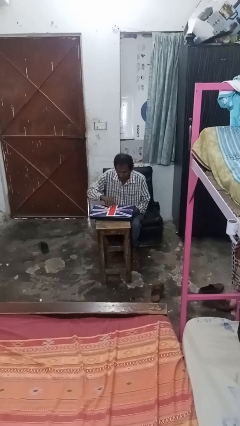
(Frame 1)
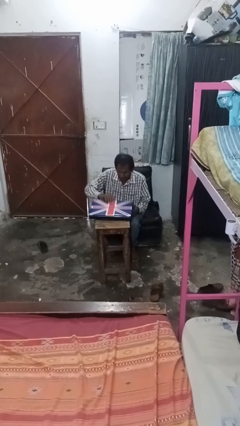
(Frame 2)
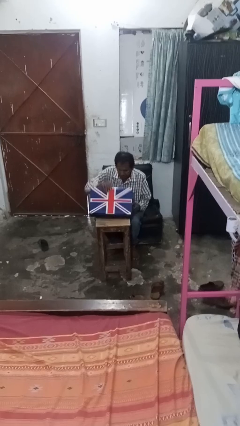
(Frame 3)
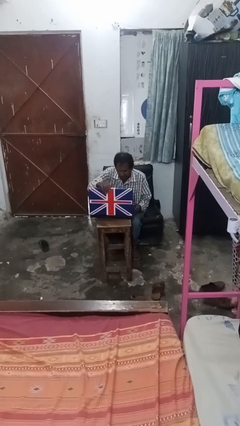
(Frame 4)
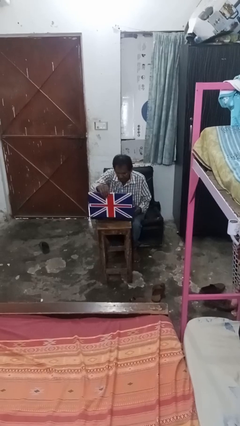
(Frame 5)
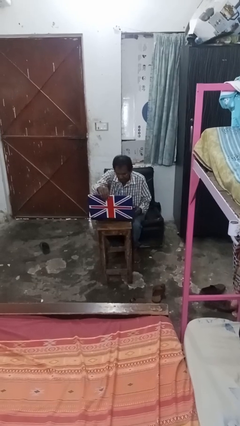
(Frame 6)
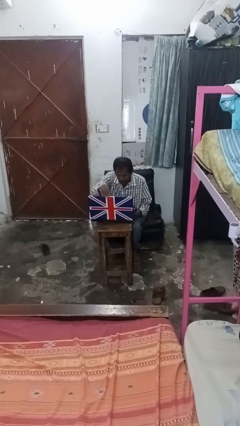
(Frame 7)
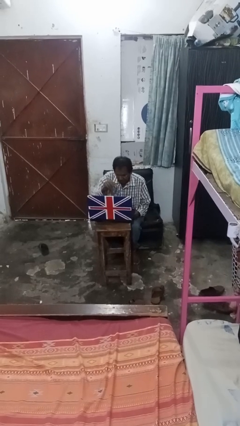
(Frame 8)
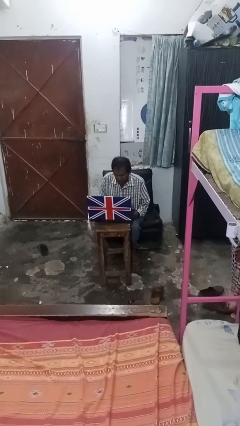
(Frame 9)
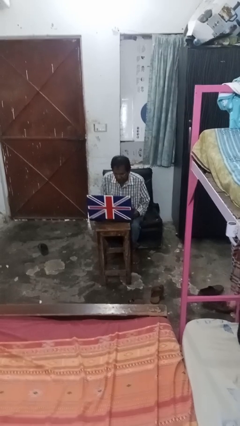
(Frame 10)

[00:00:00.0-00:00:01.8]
person opens laptop

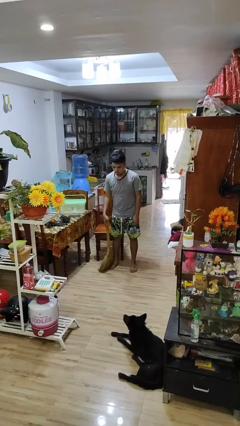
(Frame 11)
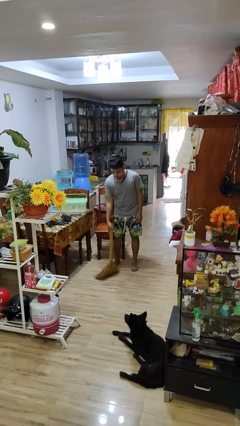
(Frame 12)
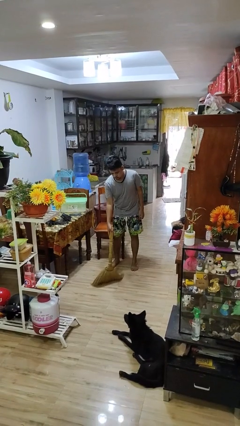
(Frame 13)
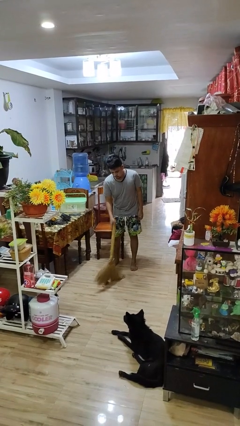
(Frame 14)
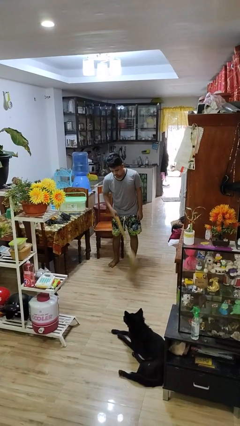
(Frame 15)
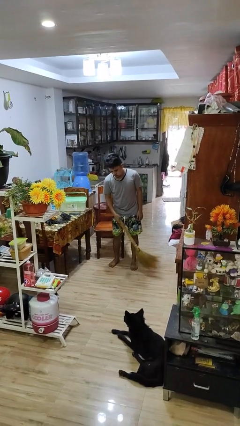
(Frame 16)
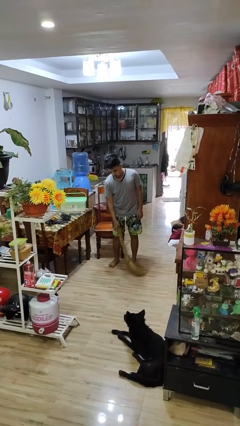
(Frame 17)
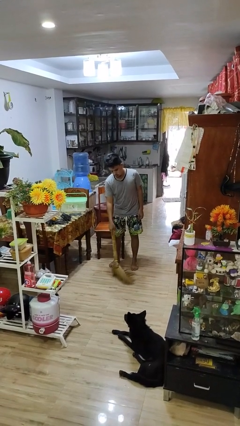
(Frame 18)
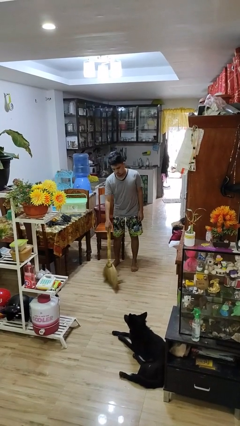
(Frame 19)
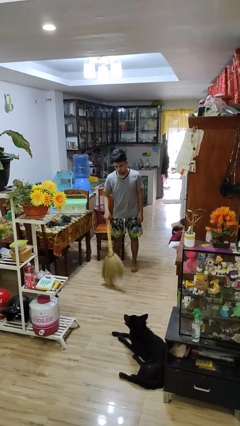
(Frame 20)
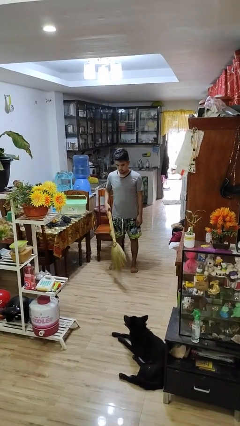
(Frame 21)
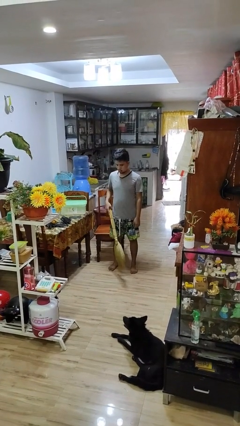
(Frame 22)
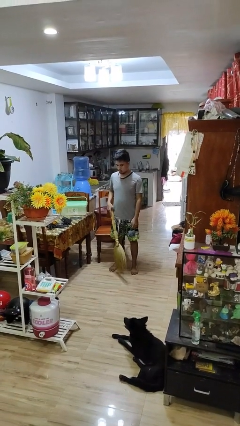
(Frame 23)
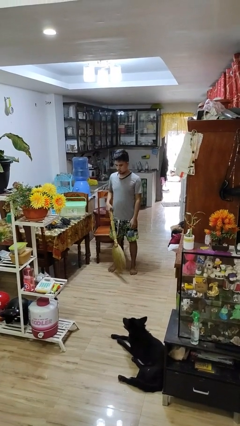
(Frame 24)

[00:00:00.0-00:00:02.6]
person sweeps floor

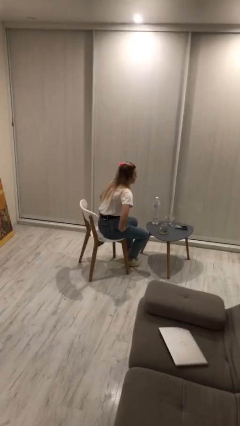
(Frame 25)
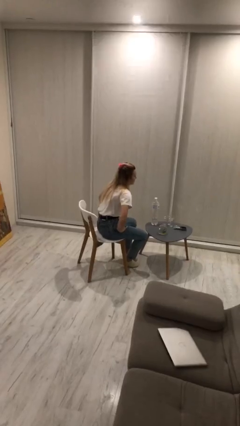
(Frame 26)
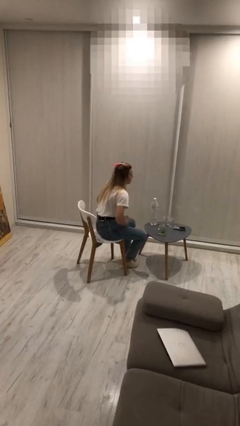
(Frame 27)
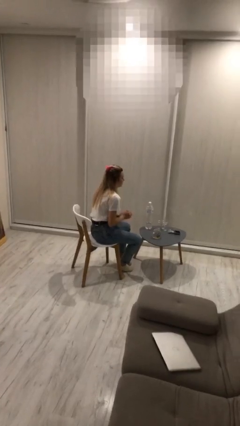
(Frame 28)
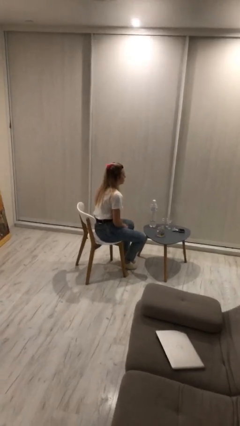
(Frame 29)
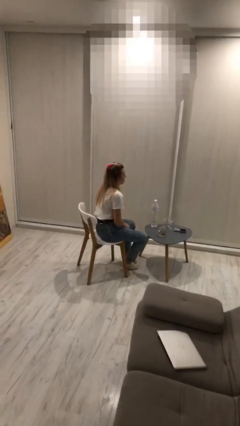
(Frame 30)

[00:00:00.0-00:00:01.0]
person slaps hands on thighs

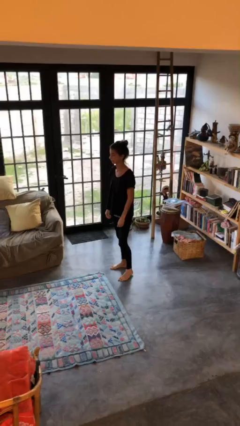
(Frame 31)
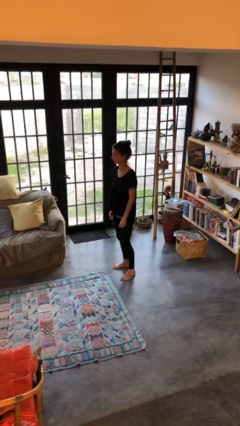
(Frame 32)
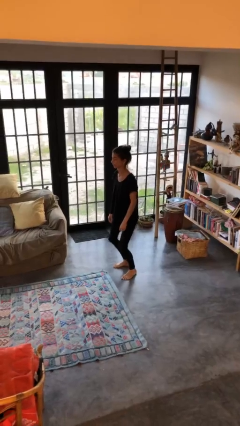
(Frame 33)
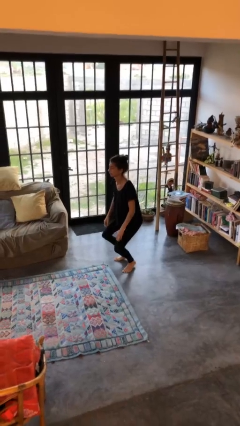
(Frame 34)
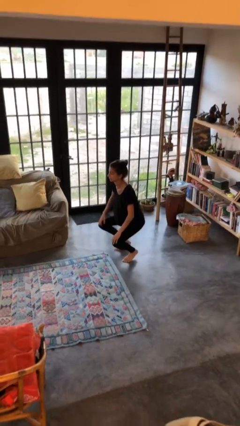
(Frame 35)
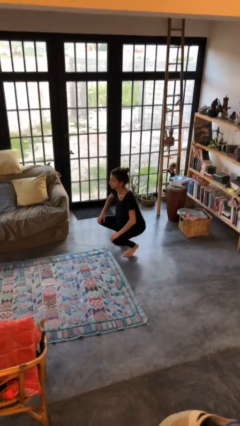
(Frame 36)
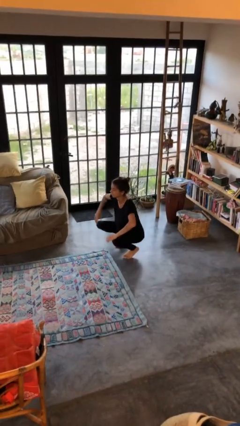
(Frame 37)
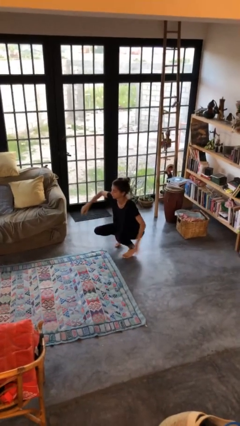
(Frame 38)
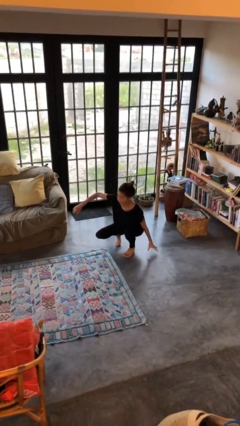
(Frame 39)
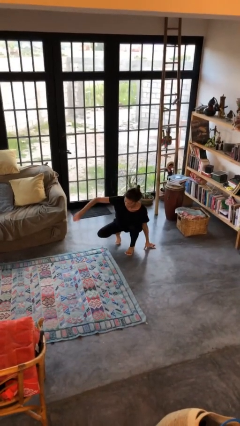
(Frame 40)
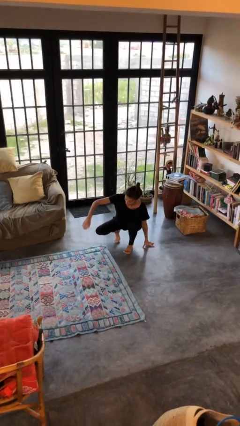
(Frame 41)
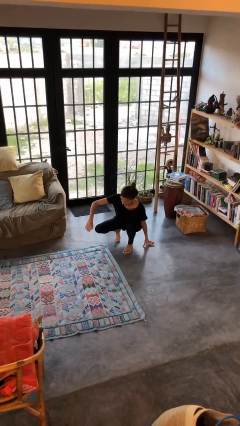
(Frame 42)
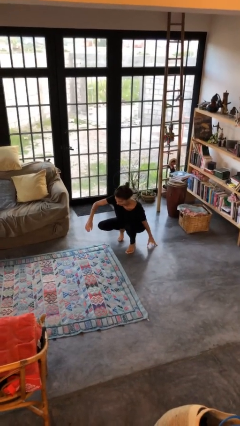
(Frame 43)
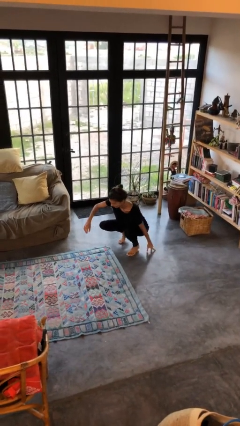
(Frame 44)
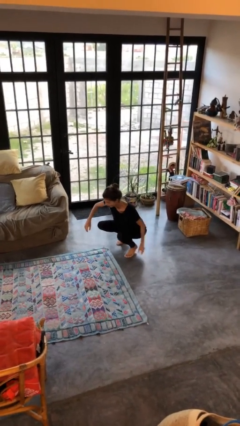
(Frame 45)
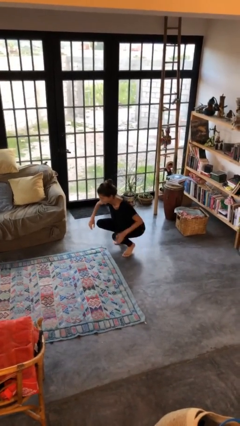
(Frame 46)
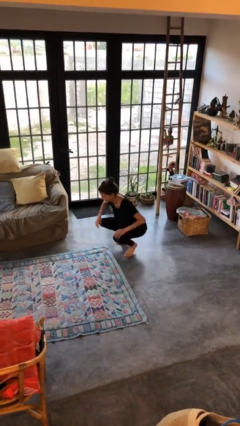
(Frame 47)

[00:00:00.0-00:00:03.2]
person squats

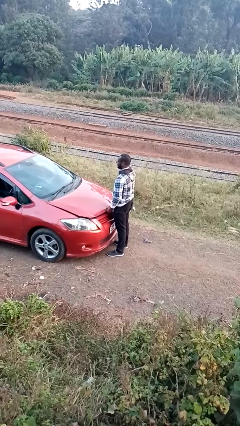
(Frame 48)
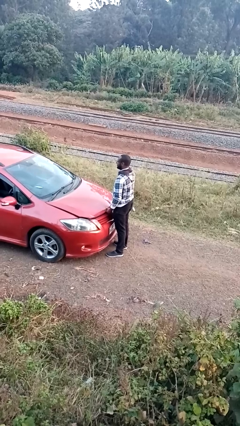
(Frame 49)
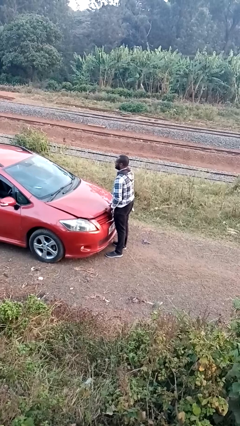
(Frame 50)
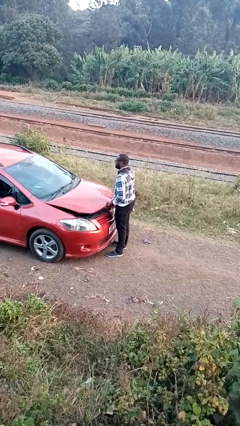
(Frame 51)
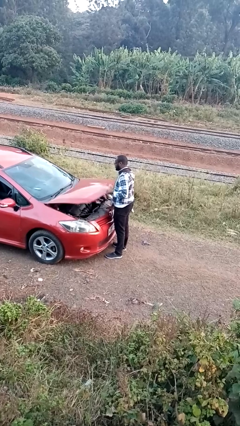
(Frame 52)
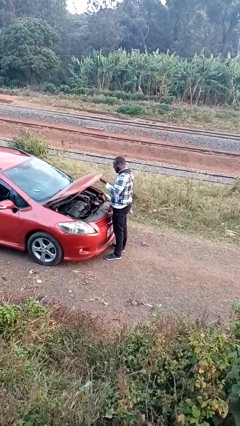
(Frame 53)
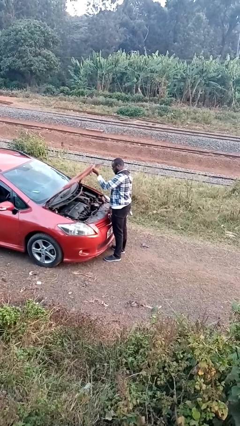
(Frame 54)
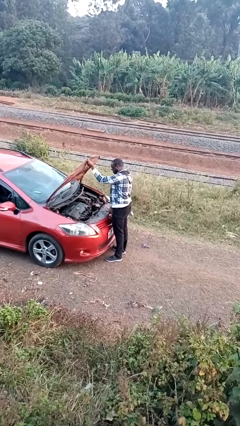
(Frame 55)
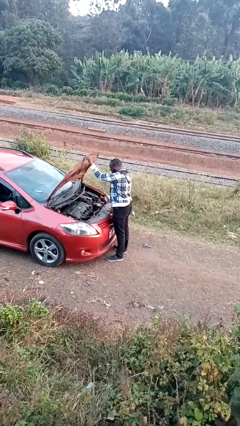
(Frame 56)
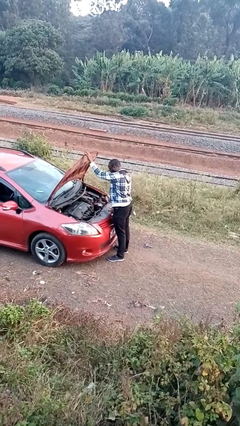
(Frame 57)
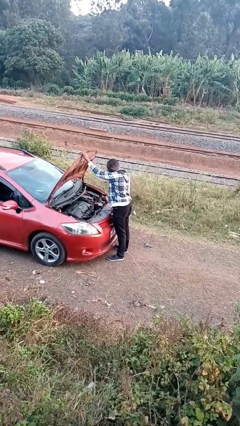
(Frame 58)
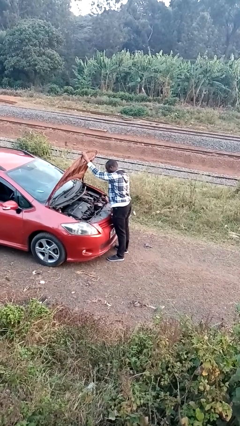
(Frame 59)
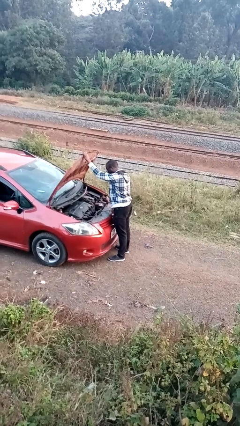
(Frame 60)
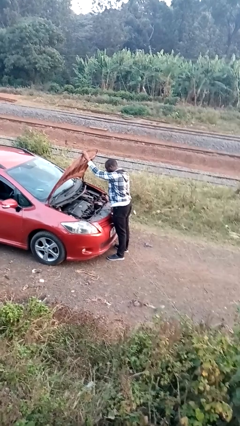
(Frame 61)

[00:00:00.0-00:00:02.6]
person opens car hood

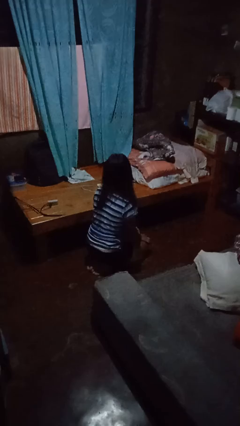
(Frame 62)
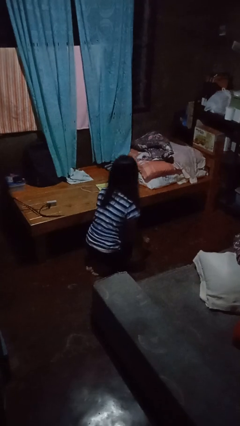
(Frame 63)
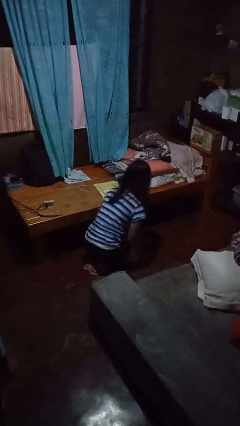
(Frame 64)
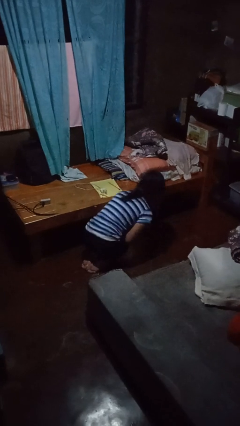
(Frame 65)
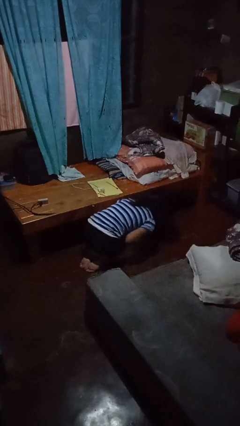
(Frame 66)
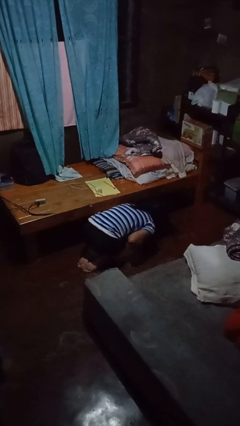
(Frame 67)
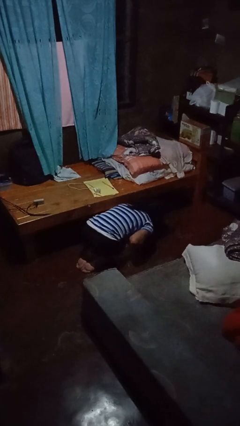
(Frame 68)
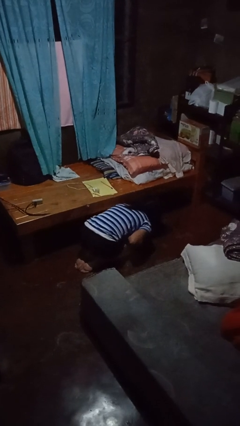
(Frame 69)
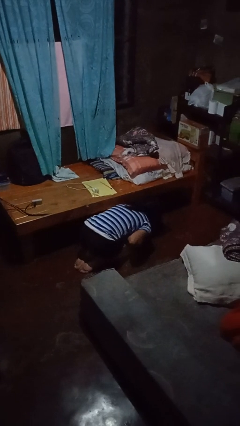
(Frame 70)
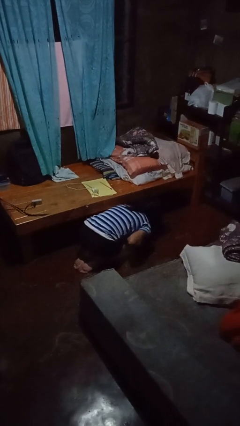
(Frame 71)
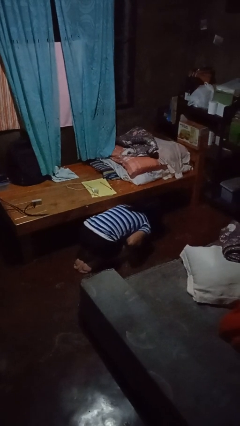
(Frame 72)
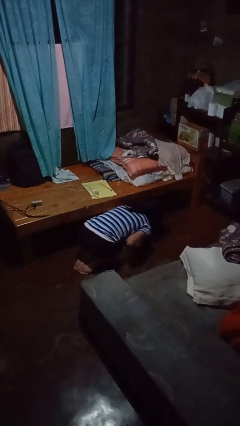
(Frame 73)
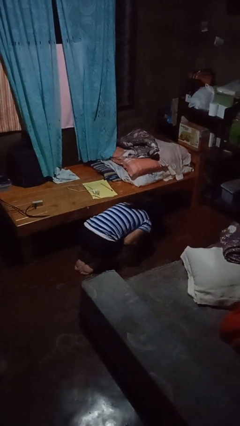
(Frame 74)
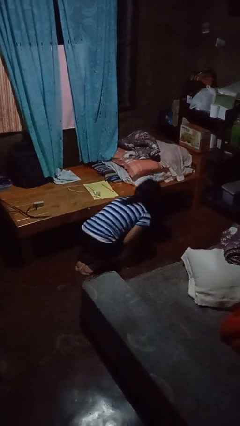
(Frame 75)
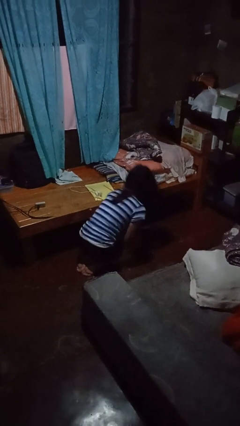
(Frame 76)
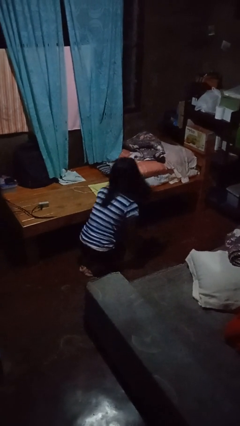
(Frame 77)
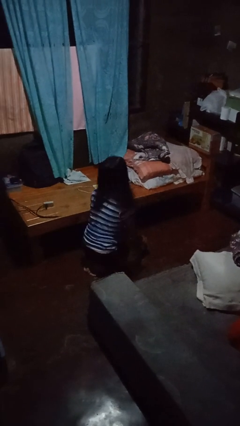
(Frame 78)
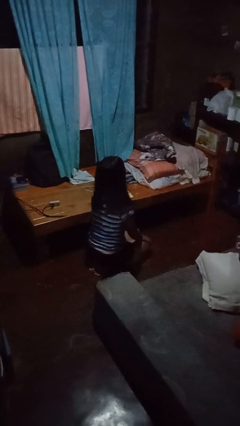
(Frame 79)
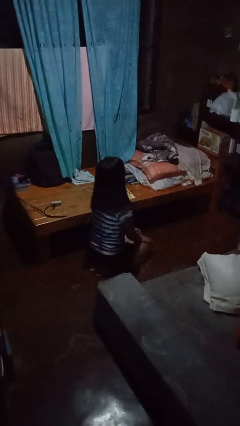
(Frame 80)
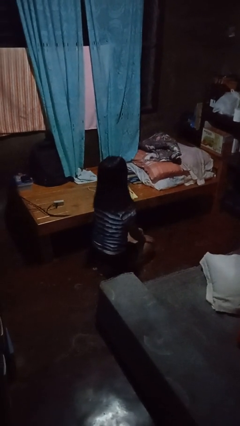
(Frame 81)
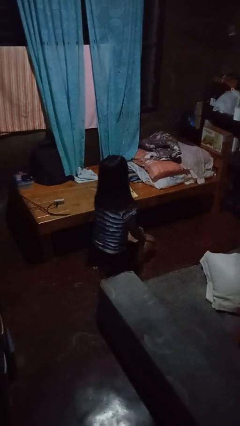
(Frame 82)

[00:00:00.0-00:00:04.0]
person searches under bed

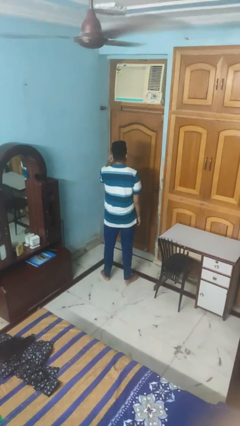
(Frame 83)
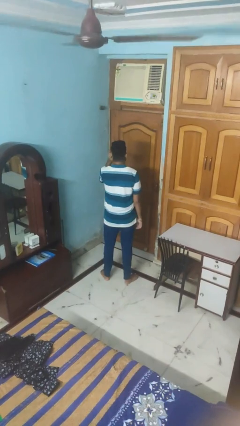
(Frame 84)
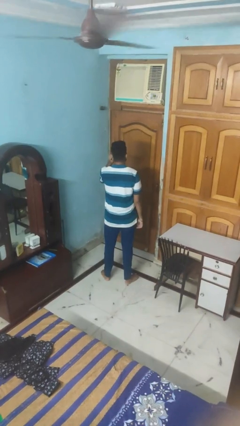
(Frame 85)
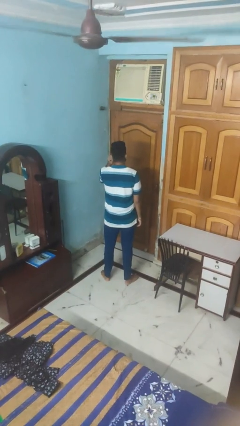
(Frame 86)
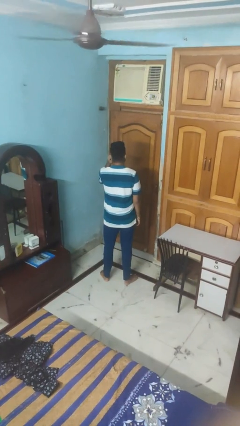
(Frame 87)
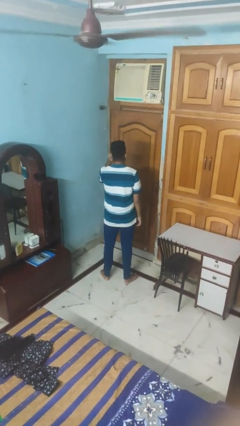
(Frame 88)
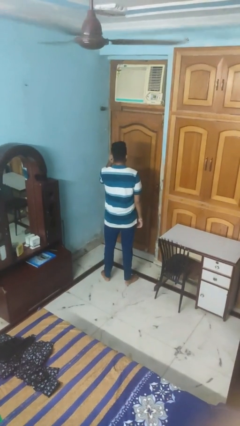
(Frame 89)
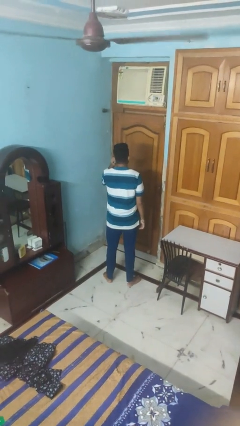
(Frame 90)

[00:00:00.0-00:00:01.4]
person touches earlobe

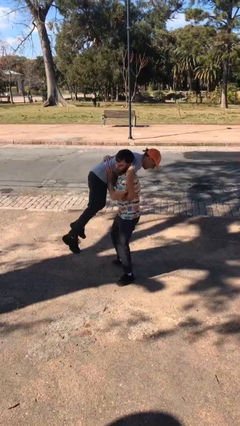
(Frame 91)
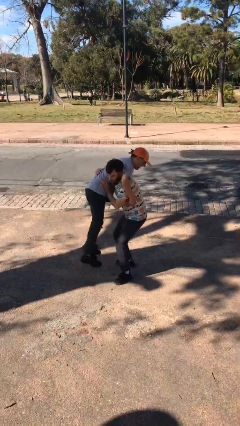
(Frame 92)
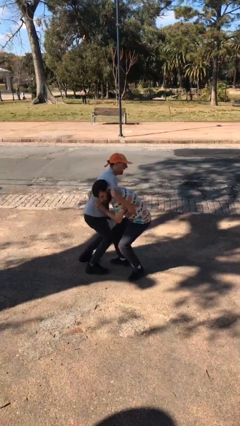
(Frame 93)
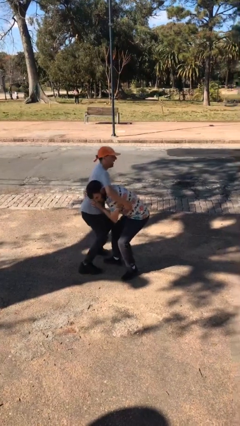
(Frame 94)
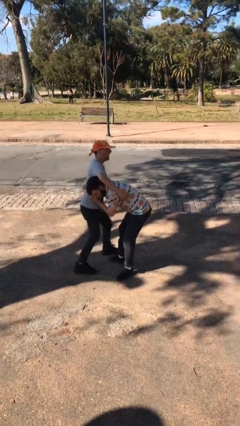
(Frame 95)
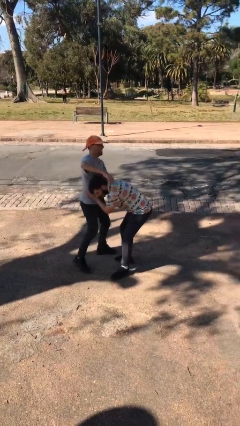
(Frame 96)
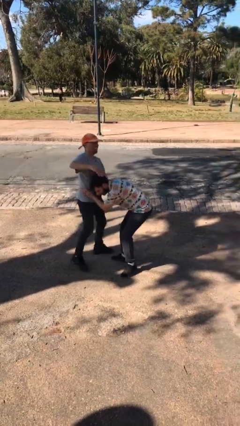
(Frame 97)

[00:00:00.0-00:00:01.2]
person puts down person
